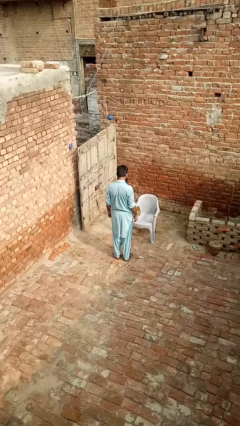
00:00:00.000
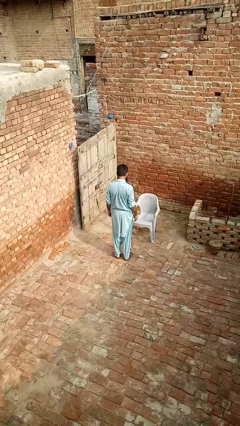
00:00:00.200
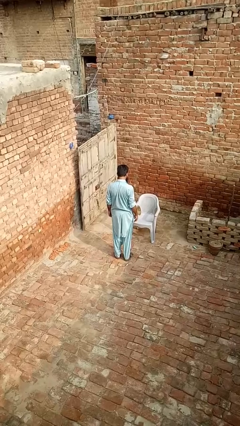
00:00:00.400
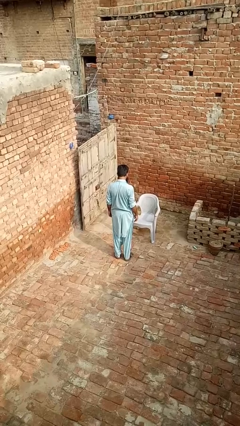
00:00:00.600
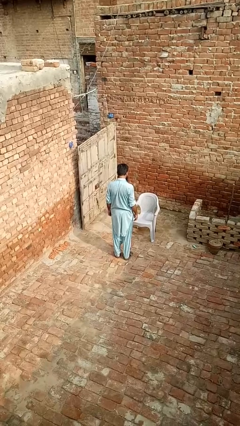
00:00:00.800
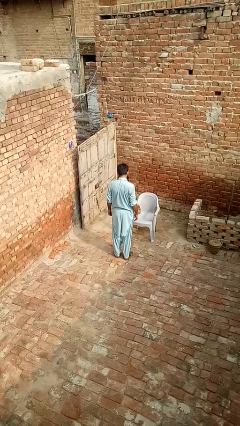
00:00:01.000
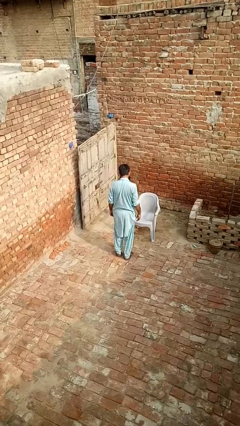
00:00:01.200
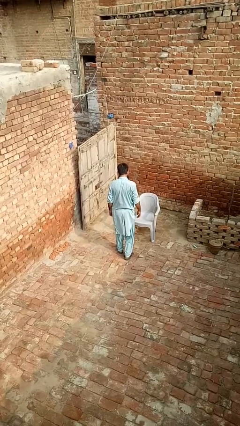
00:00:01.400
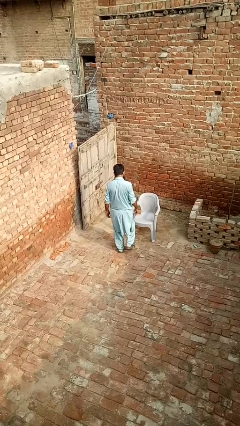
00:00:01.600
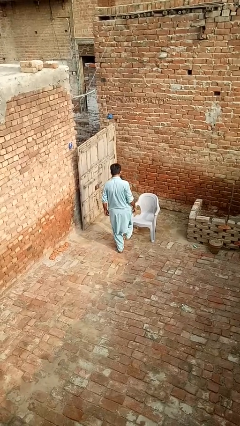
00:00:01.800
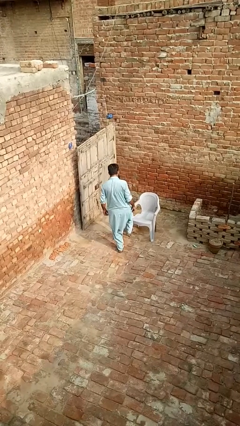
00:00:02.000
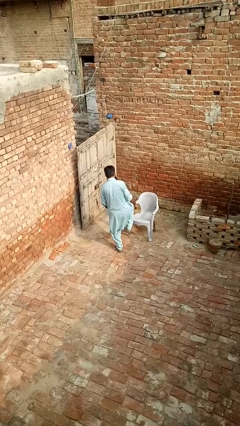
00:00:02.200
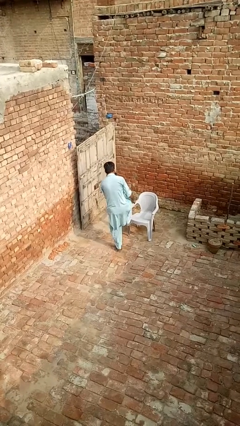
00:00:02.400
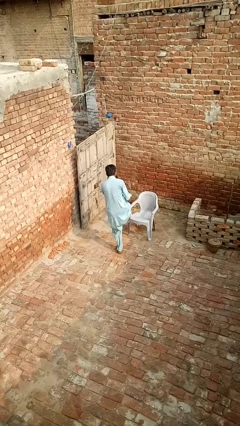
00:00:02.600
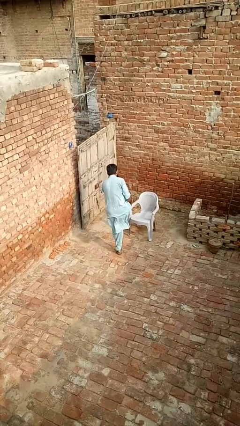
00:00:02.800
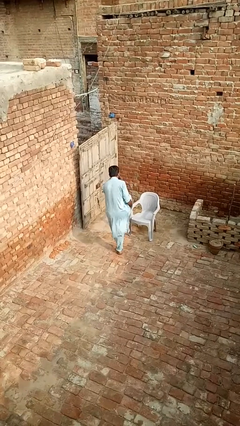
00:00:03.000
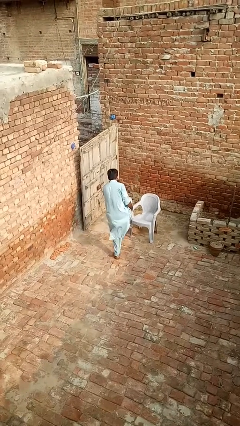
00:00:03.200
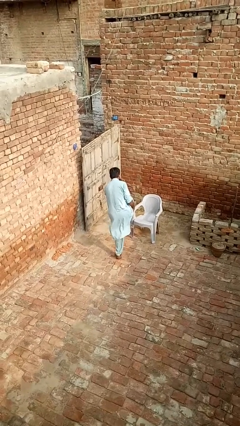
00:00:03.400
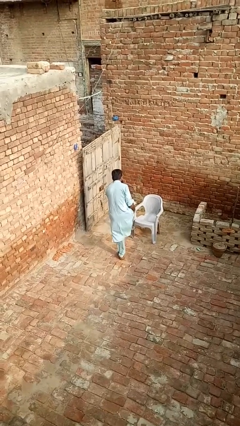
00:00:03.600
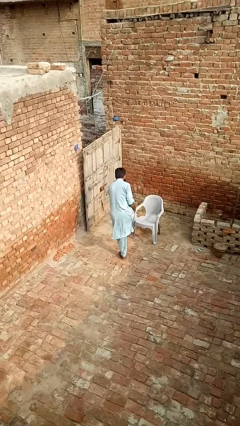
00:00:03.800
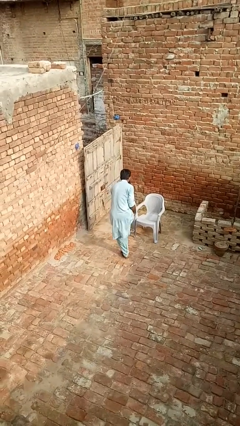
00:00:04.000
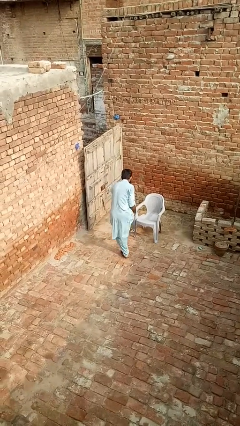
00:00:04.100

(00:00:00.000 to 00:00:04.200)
person stubs toe

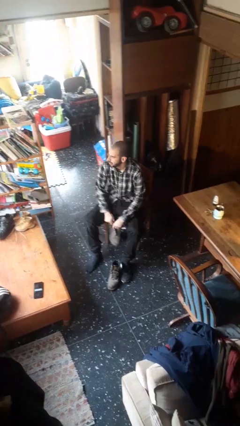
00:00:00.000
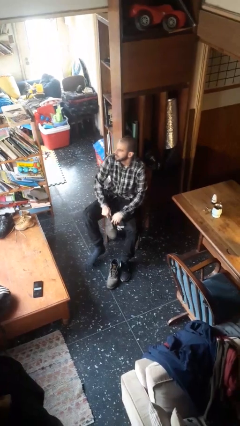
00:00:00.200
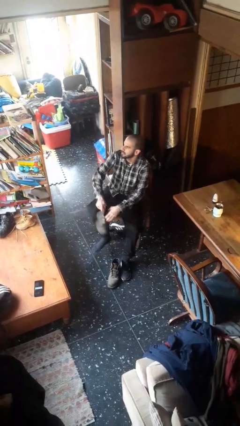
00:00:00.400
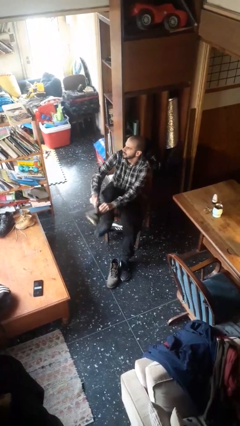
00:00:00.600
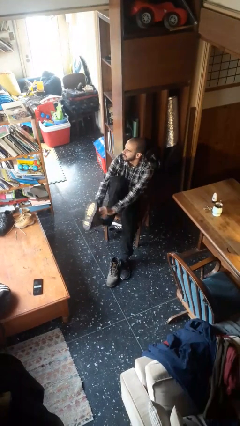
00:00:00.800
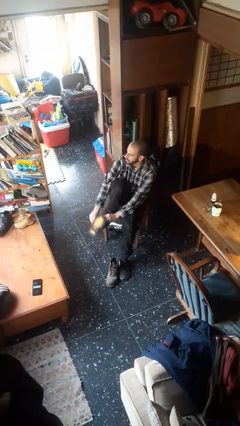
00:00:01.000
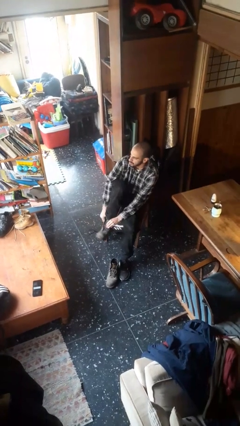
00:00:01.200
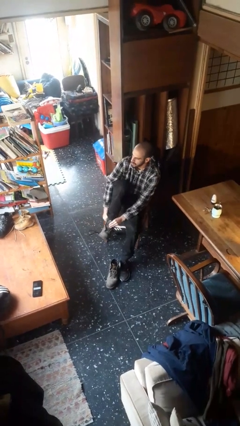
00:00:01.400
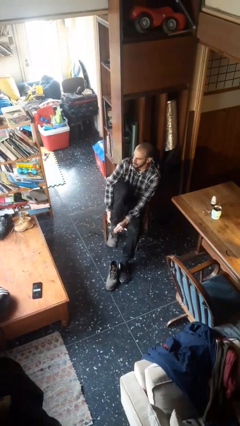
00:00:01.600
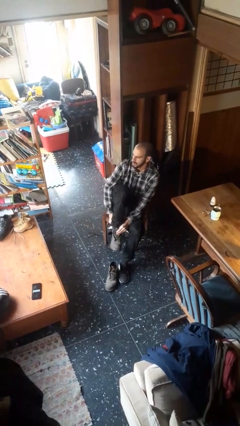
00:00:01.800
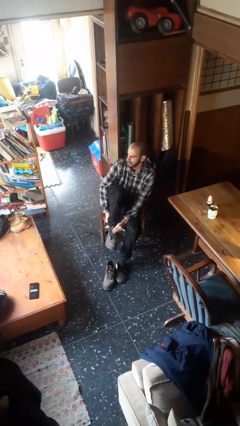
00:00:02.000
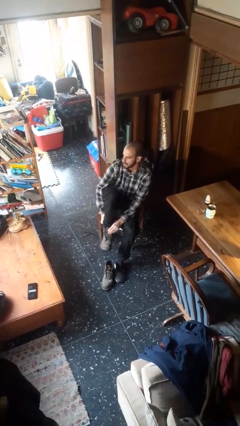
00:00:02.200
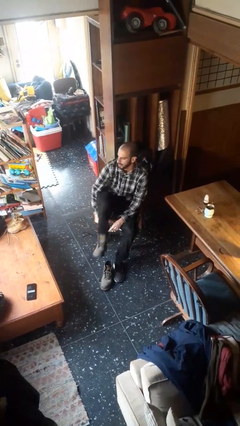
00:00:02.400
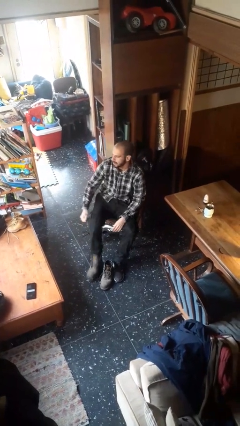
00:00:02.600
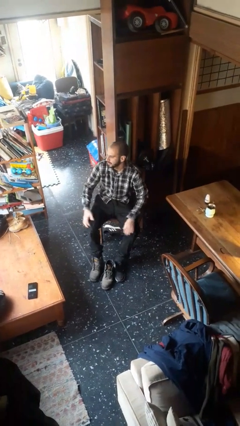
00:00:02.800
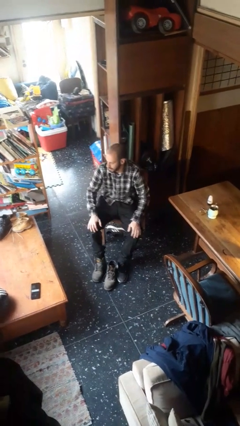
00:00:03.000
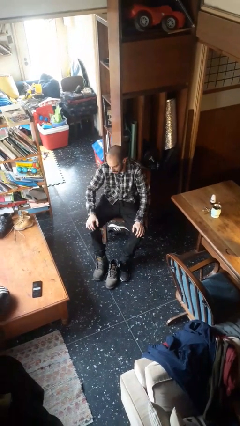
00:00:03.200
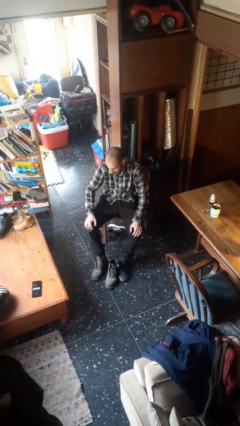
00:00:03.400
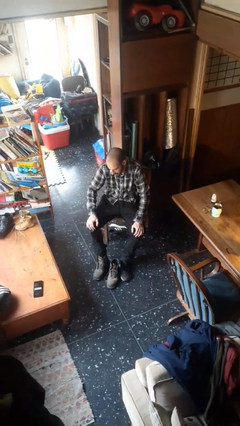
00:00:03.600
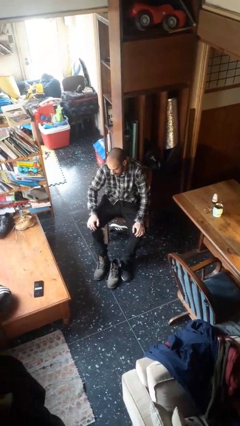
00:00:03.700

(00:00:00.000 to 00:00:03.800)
person puts on boots

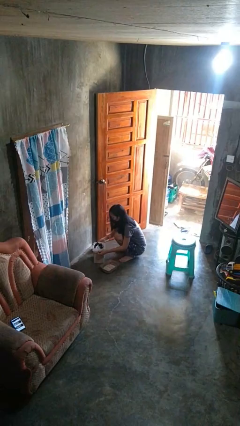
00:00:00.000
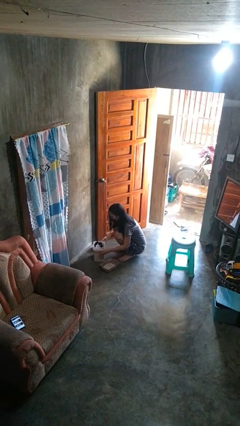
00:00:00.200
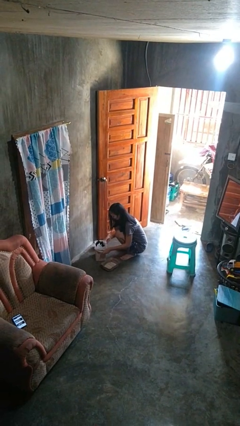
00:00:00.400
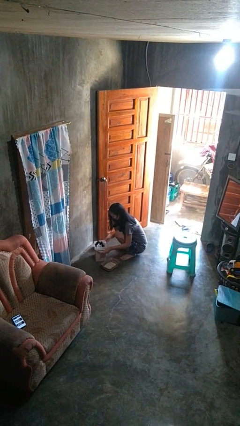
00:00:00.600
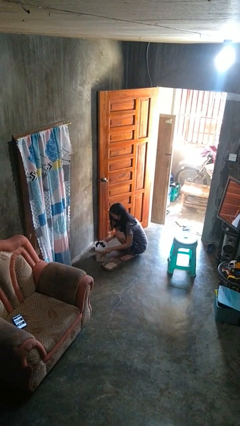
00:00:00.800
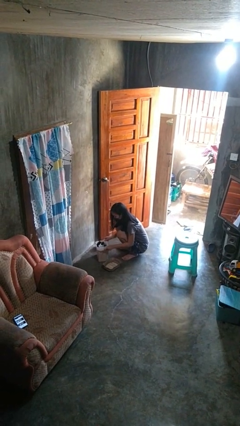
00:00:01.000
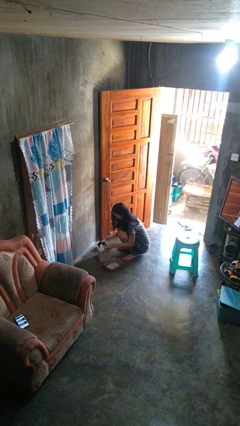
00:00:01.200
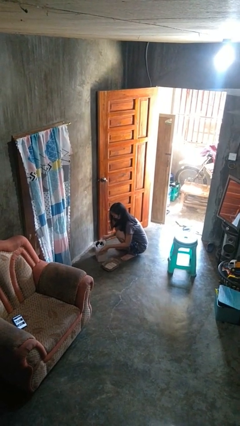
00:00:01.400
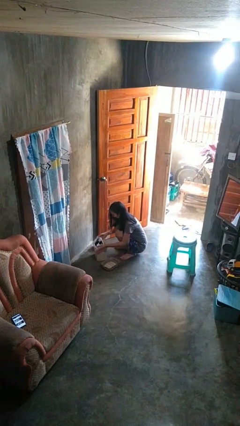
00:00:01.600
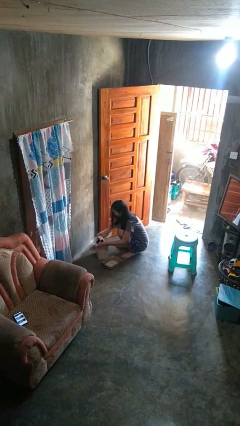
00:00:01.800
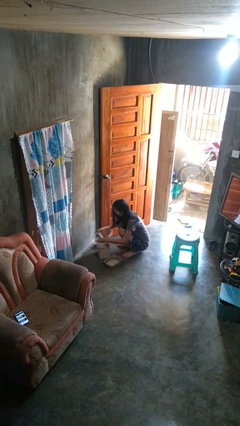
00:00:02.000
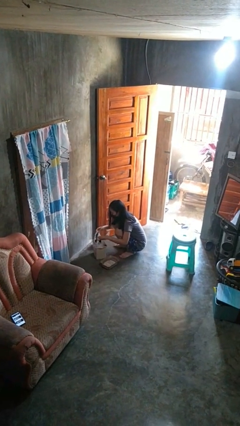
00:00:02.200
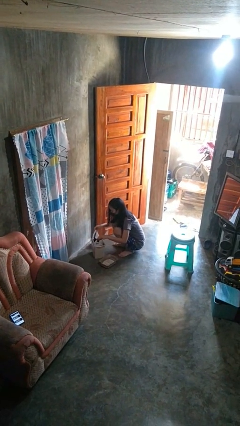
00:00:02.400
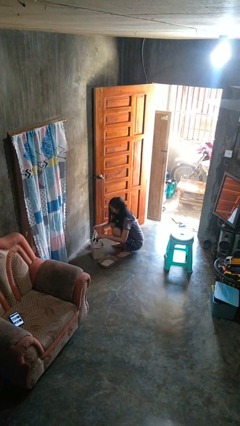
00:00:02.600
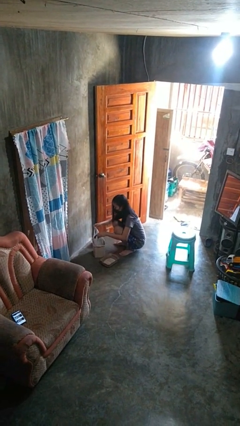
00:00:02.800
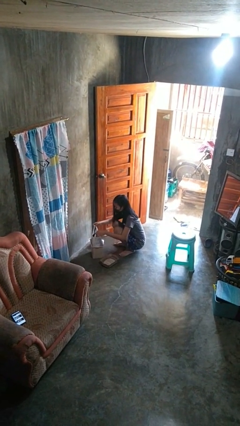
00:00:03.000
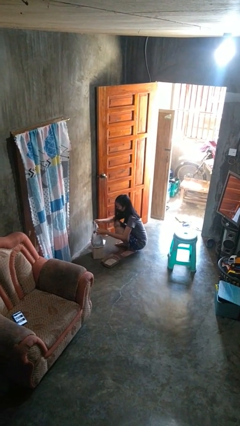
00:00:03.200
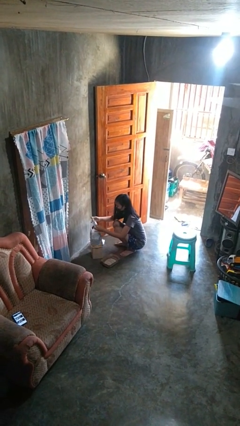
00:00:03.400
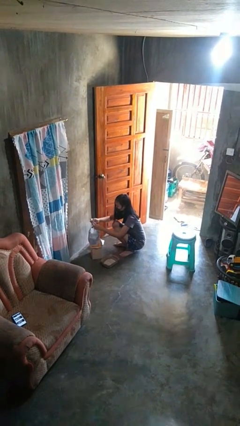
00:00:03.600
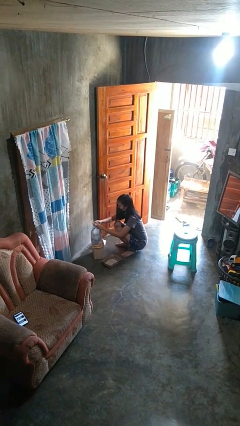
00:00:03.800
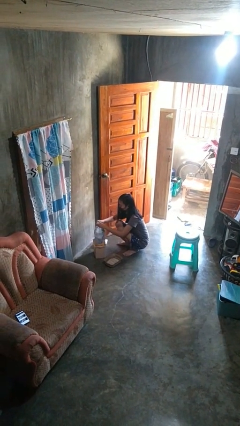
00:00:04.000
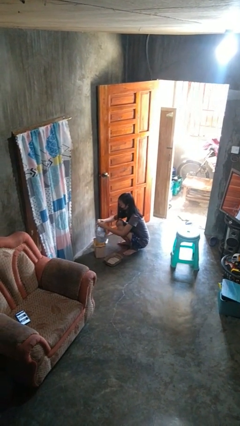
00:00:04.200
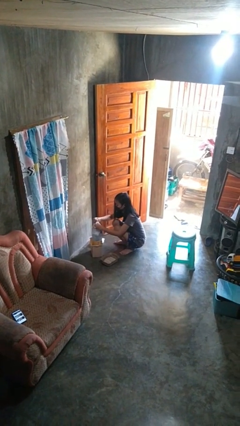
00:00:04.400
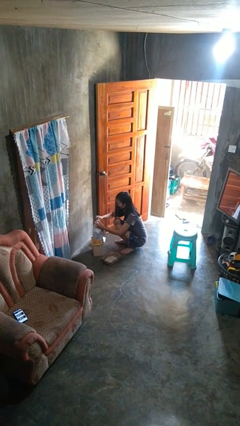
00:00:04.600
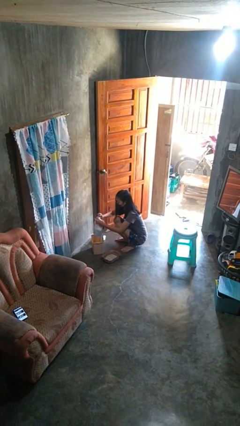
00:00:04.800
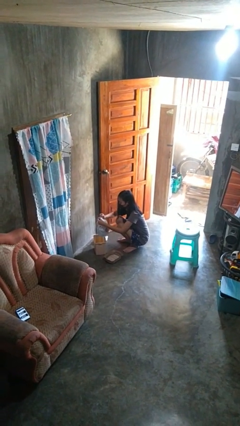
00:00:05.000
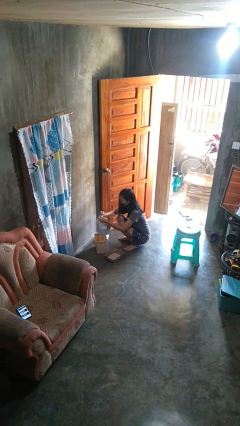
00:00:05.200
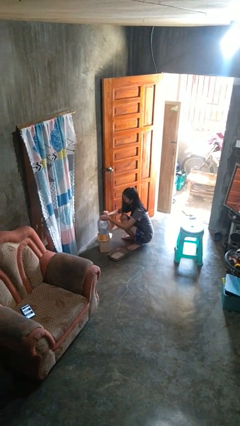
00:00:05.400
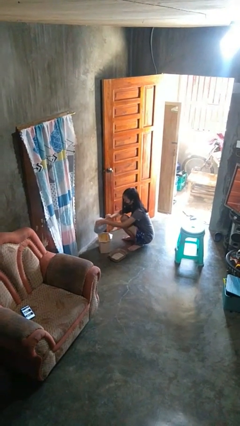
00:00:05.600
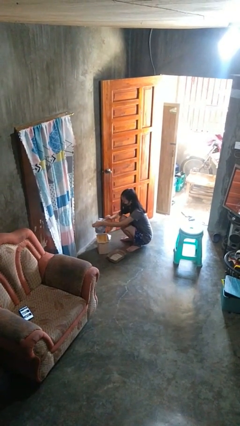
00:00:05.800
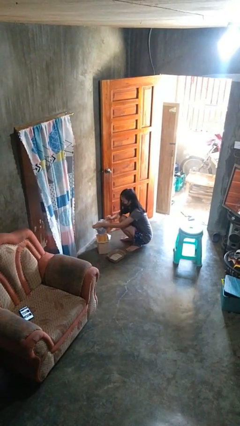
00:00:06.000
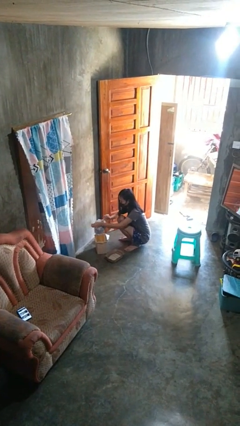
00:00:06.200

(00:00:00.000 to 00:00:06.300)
person removes trashbag from trashcan

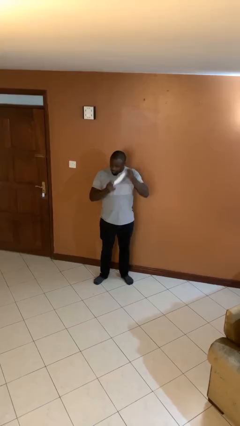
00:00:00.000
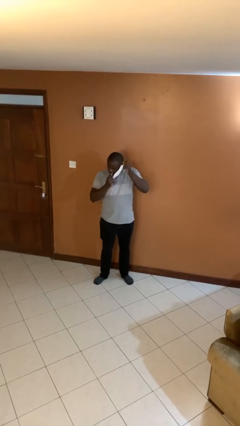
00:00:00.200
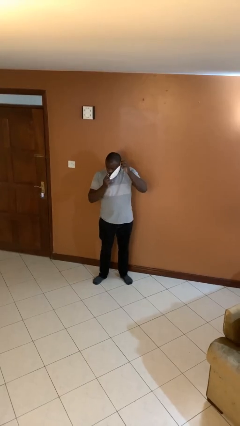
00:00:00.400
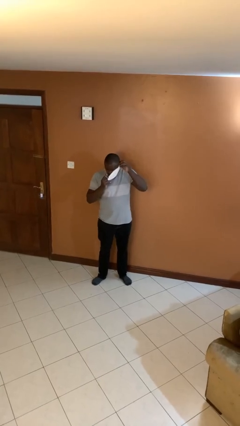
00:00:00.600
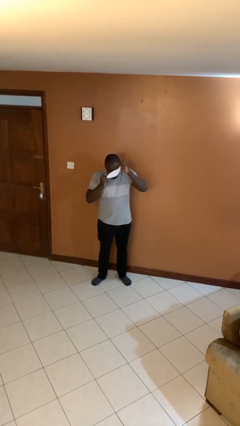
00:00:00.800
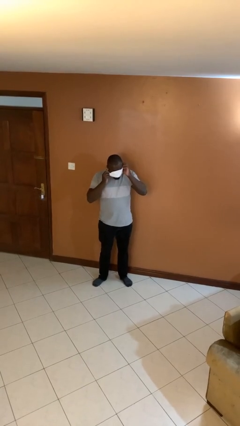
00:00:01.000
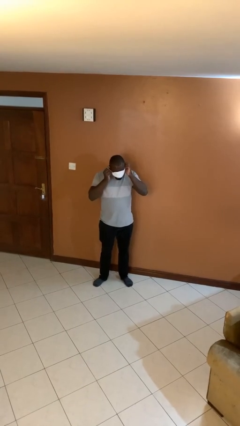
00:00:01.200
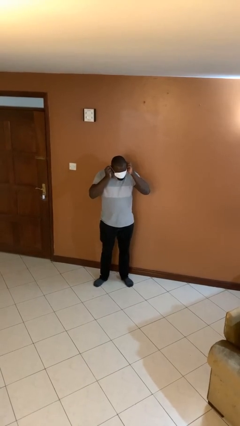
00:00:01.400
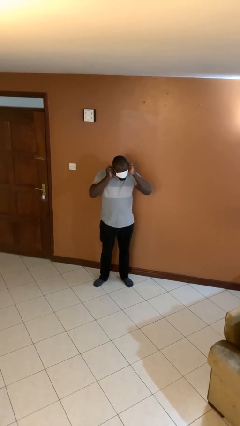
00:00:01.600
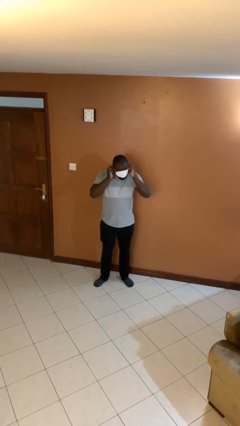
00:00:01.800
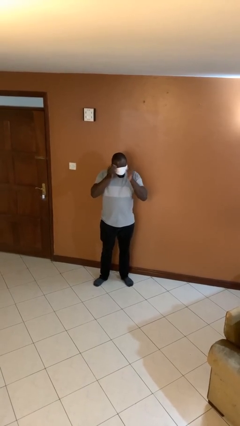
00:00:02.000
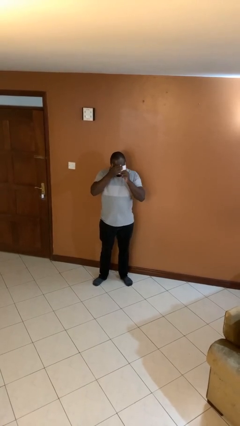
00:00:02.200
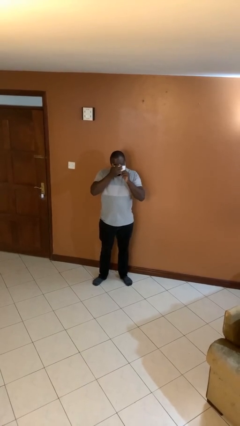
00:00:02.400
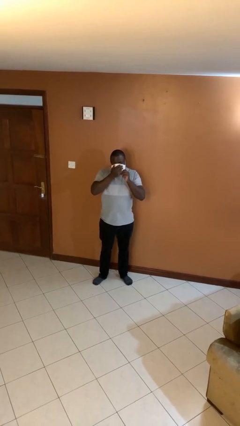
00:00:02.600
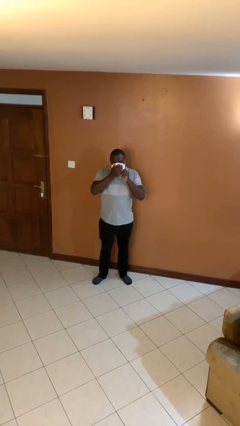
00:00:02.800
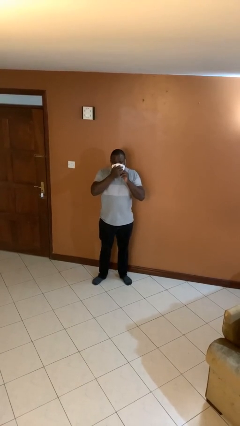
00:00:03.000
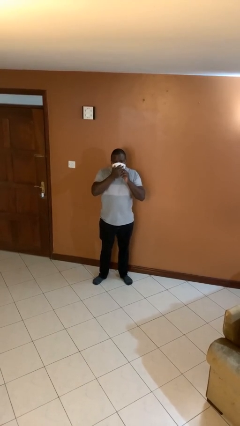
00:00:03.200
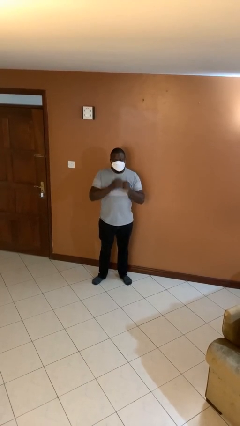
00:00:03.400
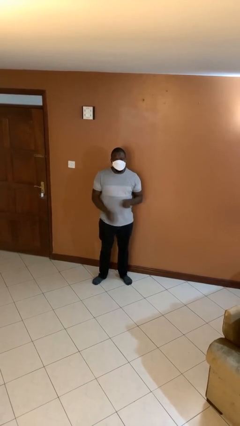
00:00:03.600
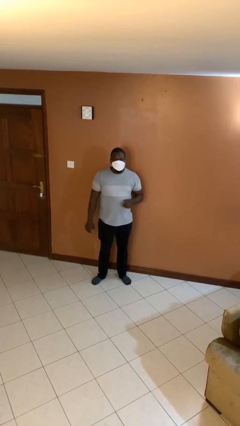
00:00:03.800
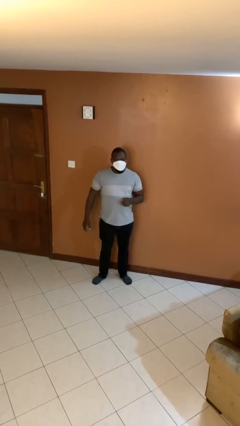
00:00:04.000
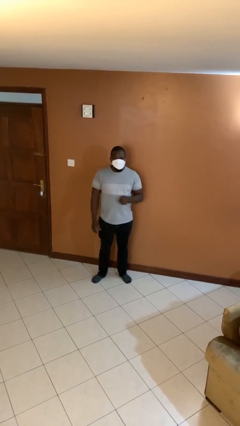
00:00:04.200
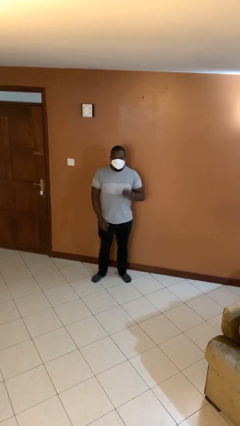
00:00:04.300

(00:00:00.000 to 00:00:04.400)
person puts on facemask
